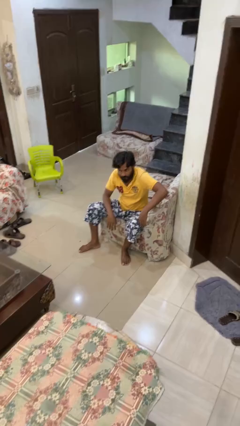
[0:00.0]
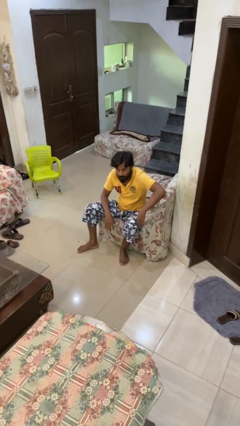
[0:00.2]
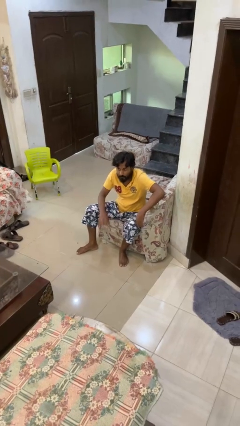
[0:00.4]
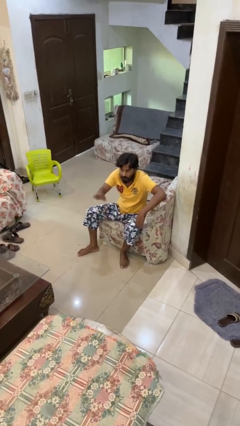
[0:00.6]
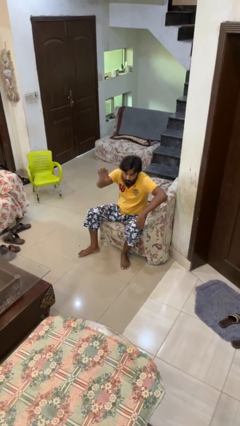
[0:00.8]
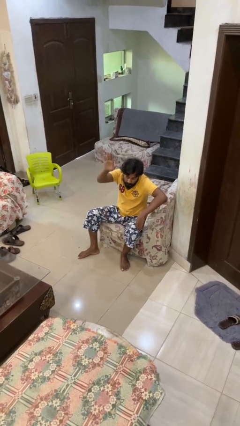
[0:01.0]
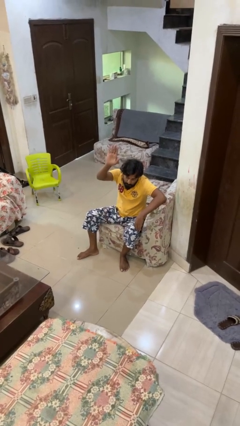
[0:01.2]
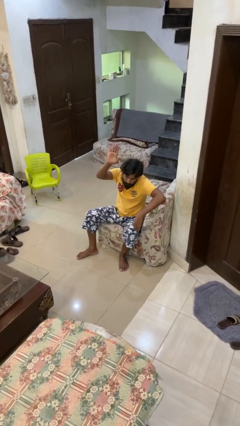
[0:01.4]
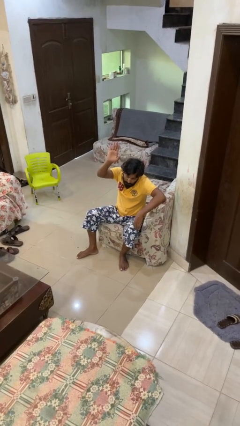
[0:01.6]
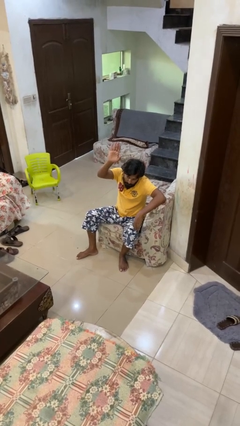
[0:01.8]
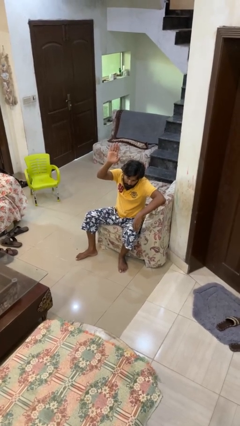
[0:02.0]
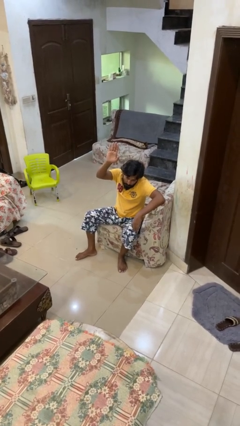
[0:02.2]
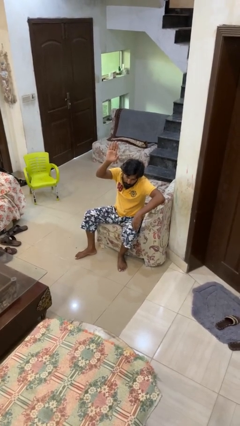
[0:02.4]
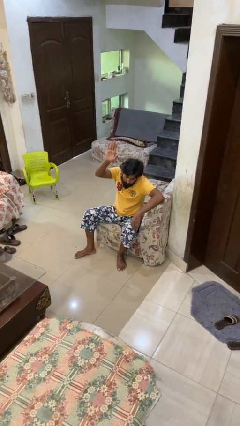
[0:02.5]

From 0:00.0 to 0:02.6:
person gestures raise hand

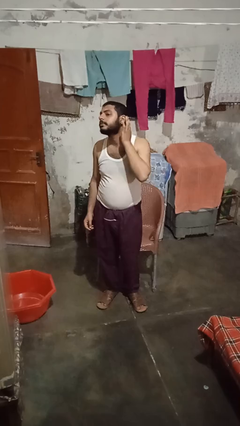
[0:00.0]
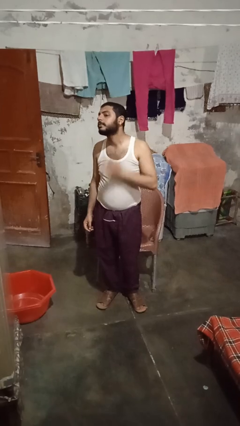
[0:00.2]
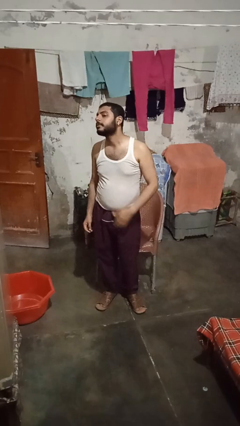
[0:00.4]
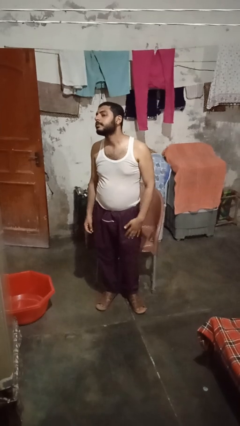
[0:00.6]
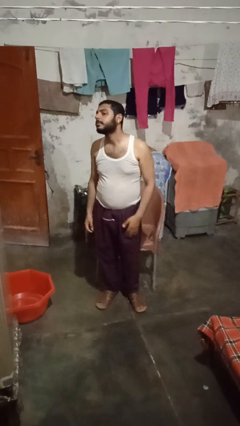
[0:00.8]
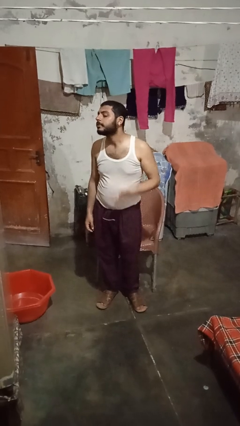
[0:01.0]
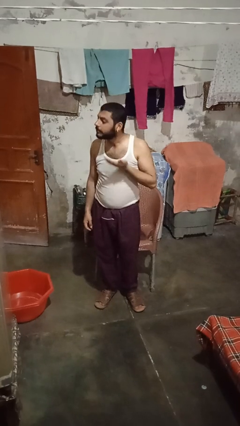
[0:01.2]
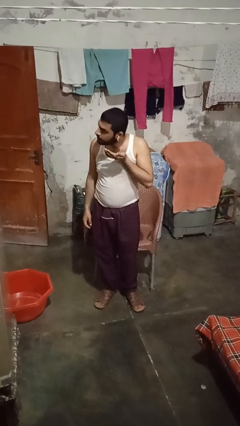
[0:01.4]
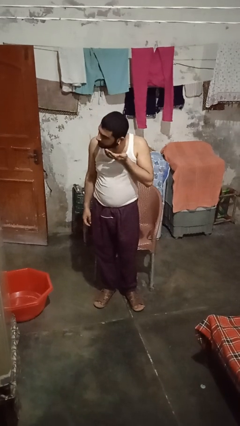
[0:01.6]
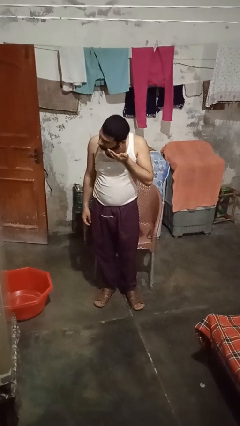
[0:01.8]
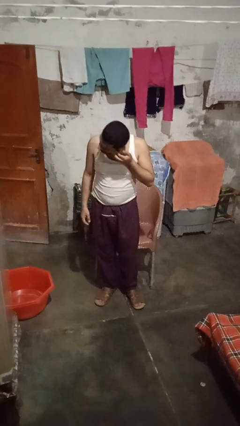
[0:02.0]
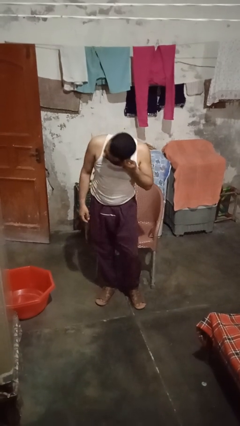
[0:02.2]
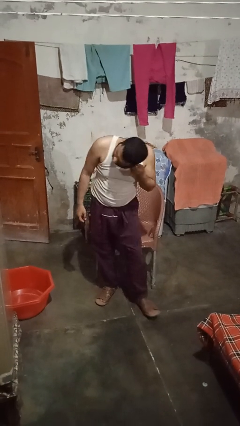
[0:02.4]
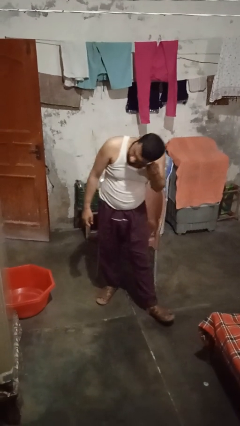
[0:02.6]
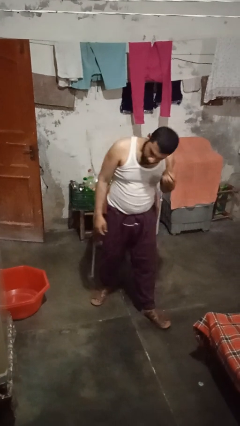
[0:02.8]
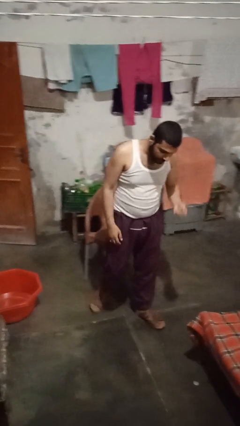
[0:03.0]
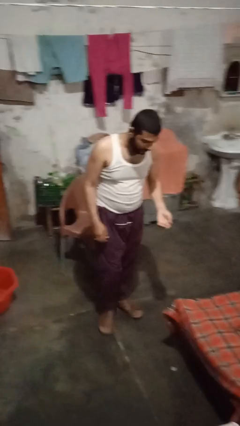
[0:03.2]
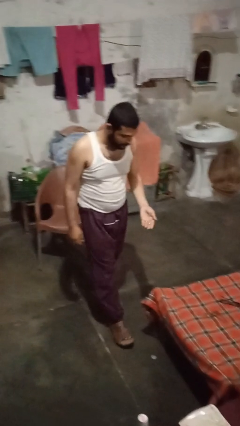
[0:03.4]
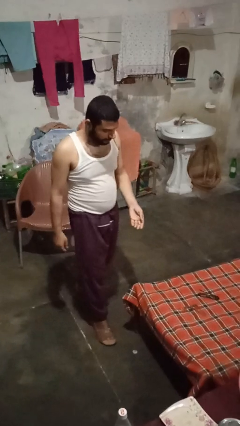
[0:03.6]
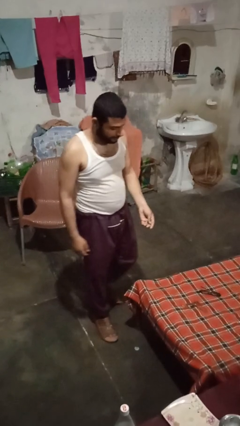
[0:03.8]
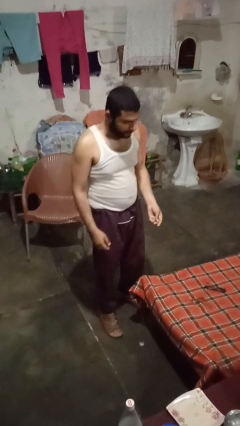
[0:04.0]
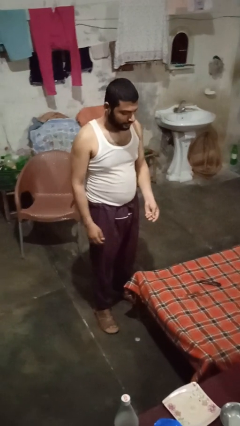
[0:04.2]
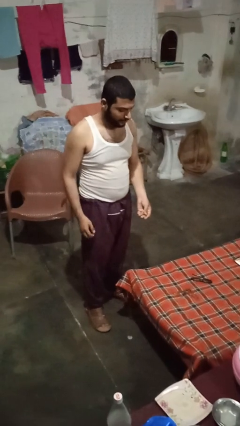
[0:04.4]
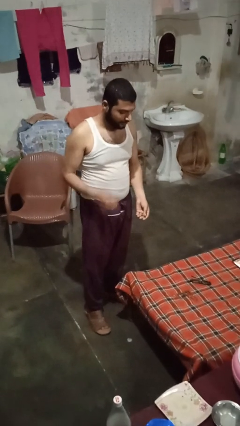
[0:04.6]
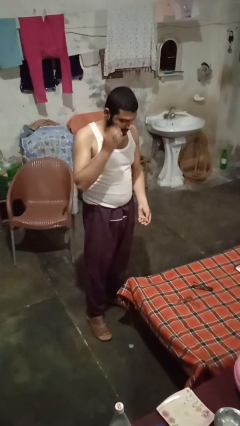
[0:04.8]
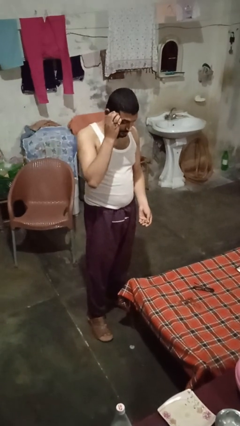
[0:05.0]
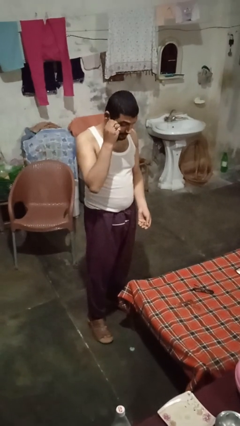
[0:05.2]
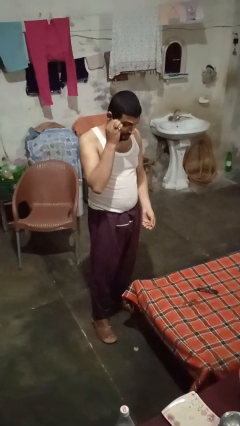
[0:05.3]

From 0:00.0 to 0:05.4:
person takes off earrings

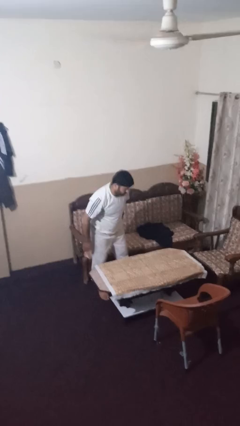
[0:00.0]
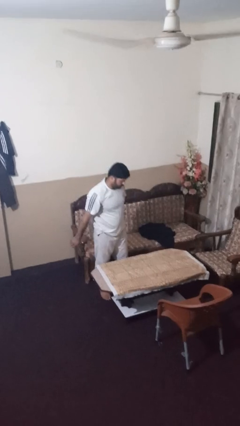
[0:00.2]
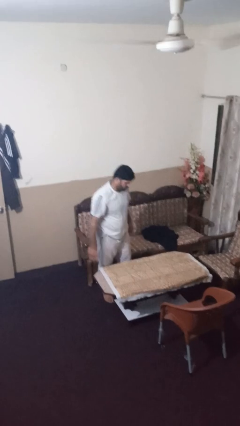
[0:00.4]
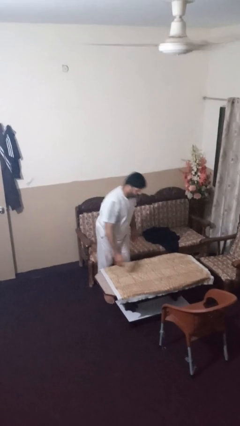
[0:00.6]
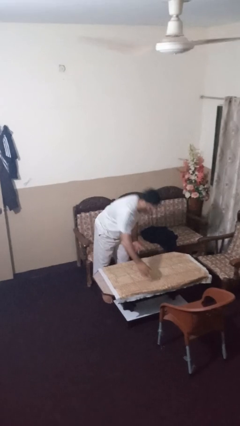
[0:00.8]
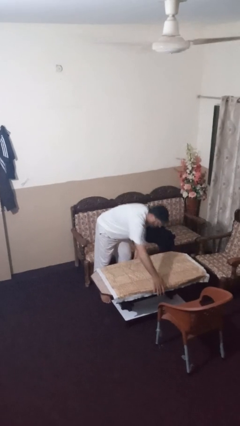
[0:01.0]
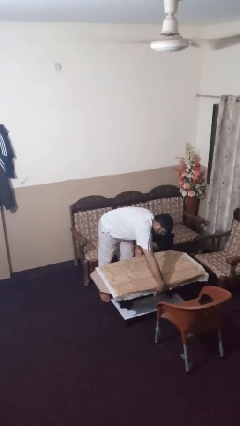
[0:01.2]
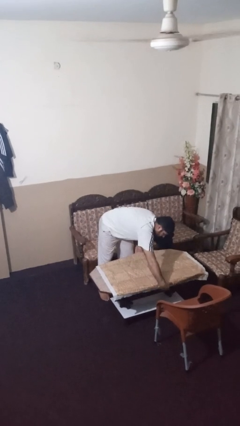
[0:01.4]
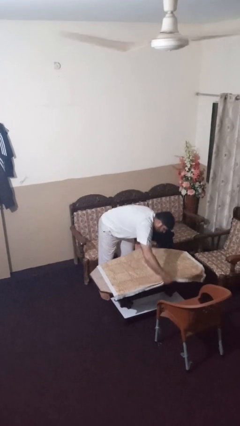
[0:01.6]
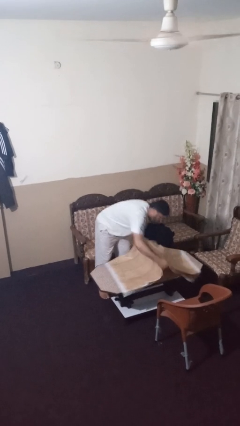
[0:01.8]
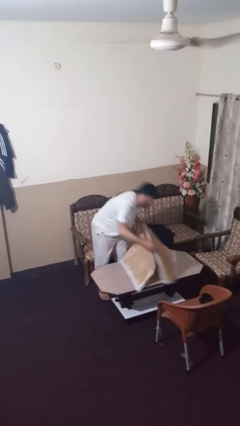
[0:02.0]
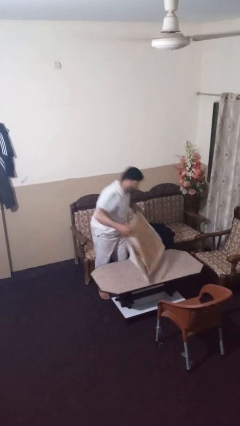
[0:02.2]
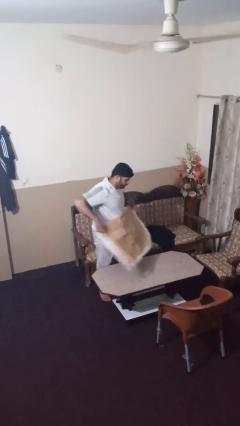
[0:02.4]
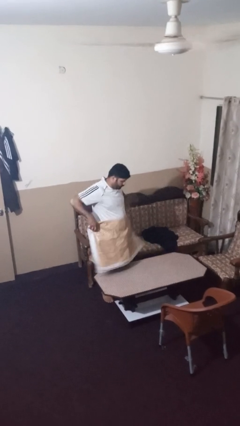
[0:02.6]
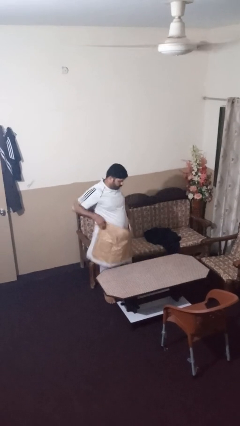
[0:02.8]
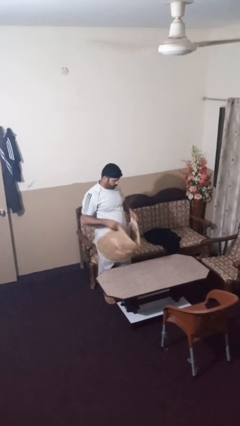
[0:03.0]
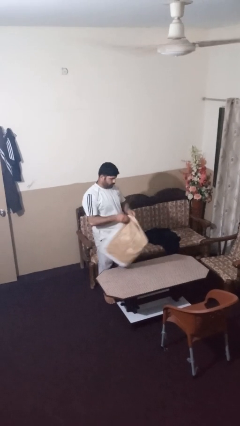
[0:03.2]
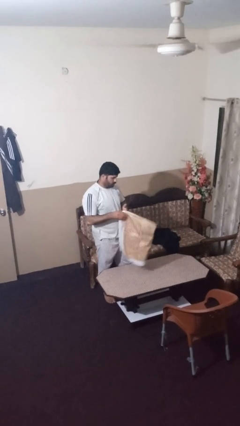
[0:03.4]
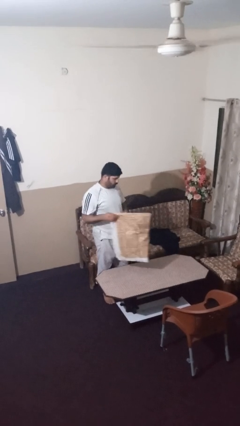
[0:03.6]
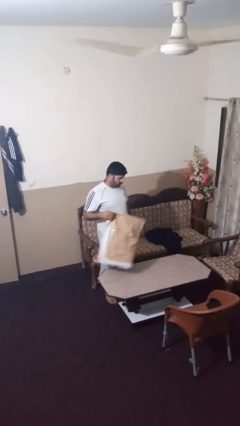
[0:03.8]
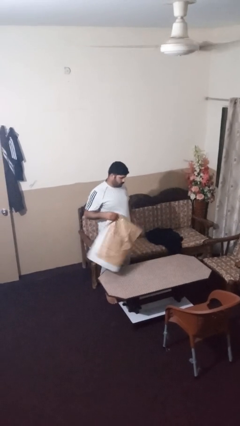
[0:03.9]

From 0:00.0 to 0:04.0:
person folds tablecloth

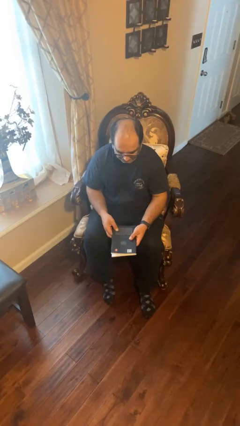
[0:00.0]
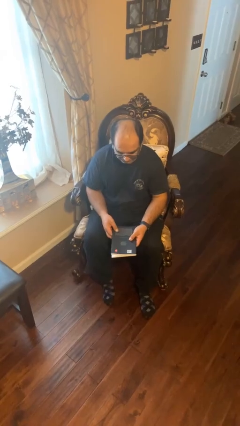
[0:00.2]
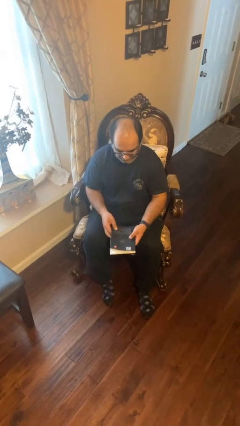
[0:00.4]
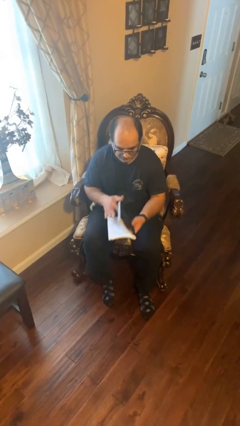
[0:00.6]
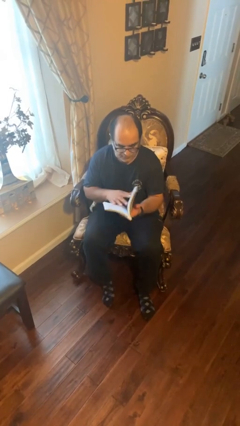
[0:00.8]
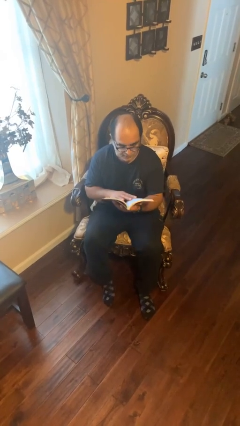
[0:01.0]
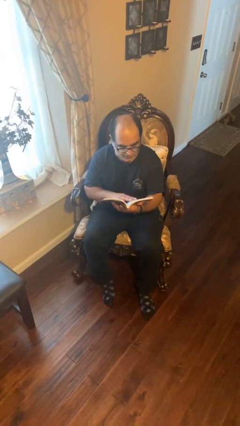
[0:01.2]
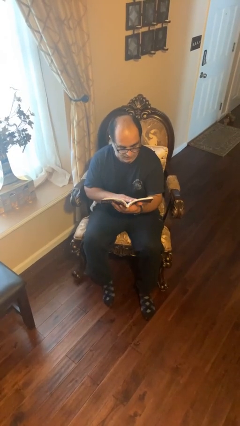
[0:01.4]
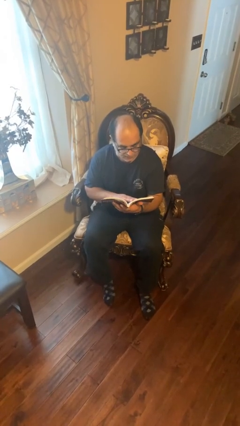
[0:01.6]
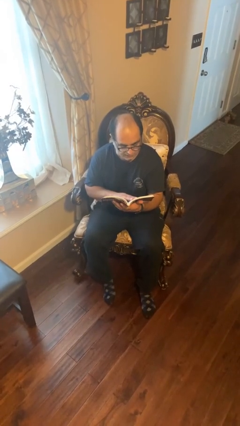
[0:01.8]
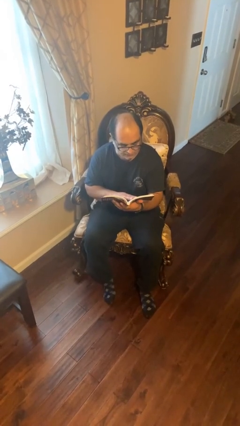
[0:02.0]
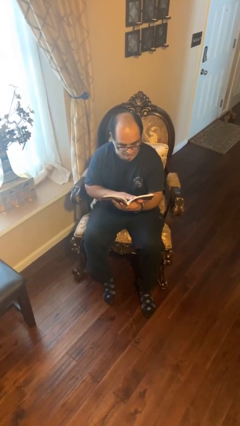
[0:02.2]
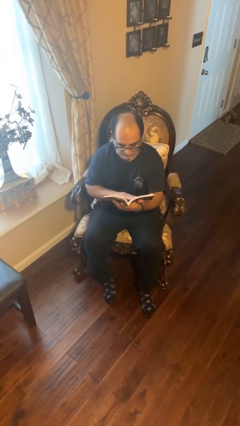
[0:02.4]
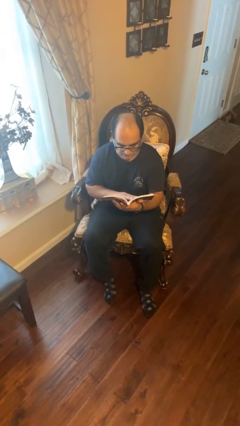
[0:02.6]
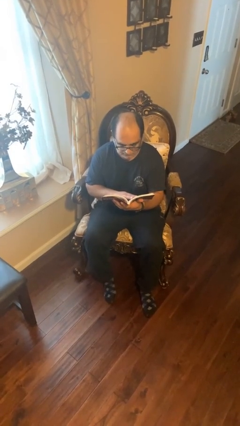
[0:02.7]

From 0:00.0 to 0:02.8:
person reads document

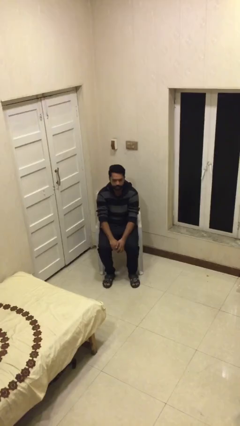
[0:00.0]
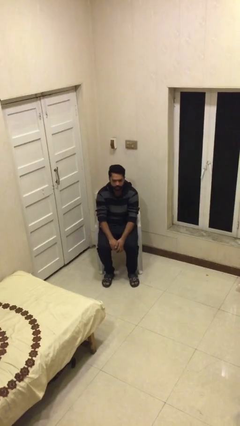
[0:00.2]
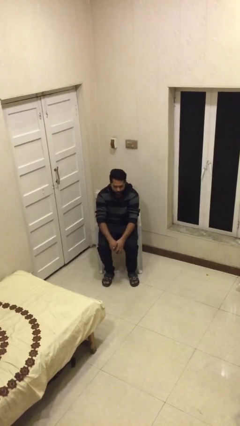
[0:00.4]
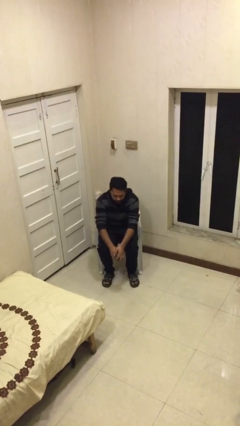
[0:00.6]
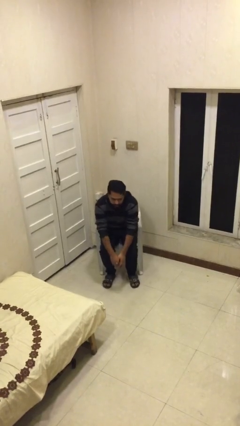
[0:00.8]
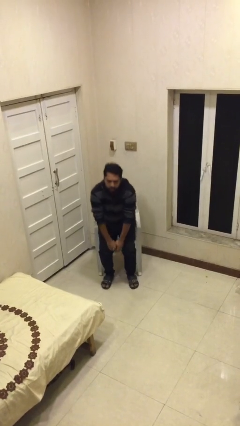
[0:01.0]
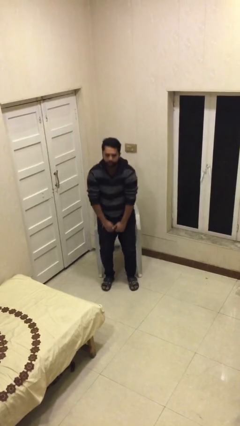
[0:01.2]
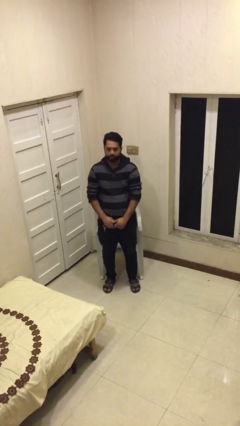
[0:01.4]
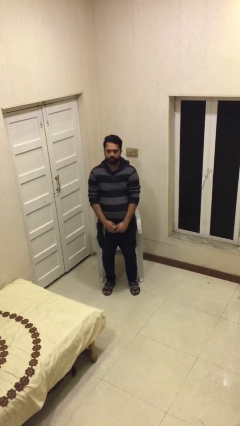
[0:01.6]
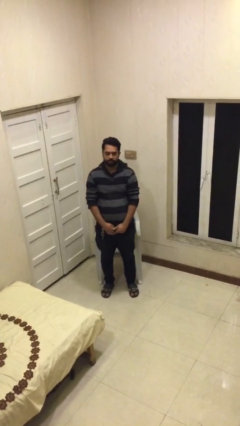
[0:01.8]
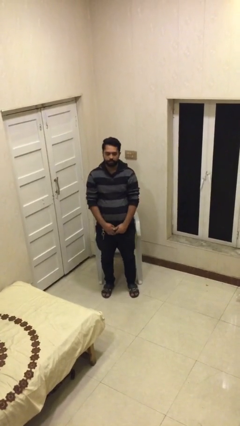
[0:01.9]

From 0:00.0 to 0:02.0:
person stands up

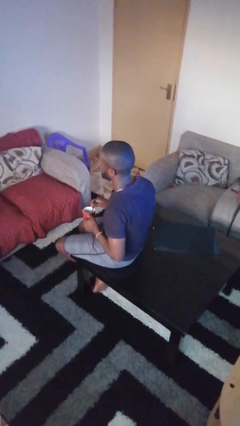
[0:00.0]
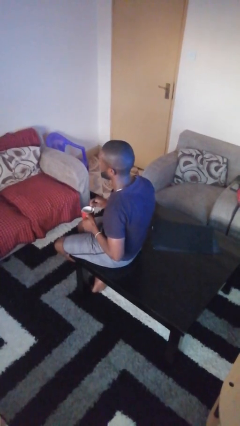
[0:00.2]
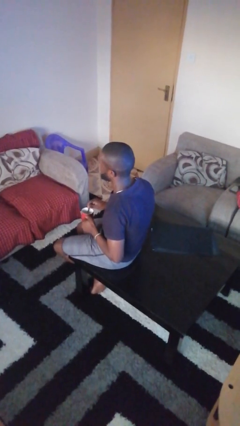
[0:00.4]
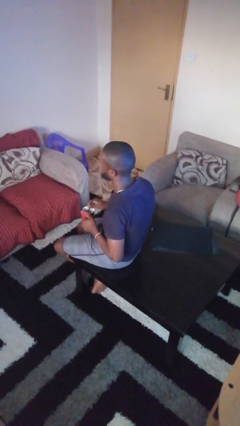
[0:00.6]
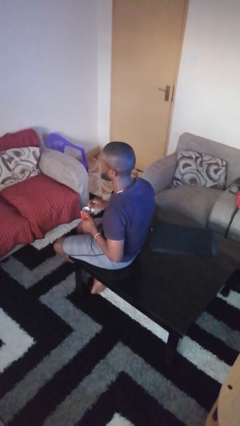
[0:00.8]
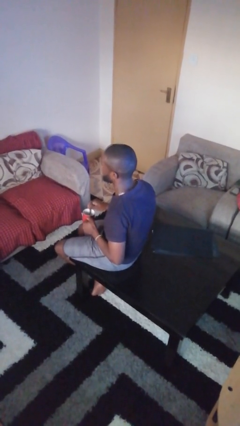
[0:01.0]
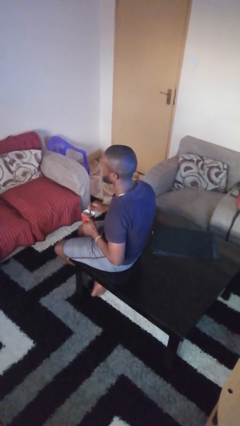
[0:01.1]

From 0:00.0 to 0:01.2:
person stirs mug
